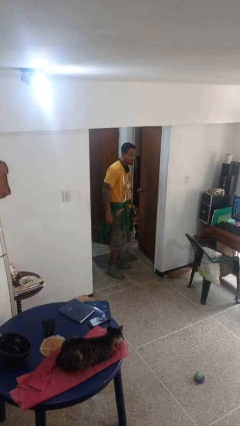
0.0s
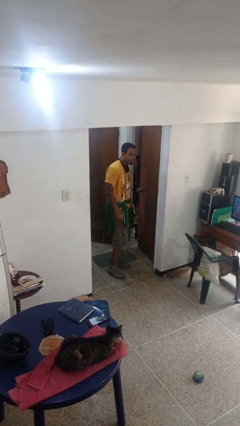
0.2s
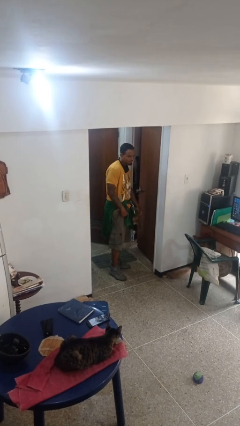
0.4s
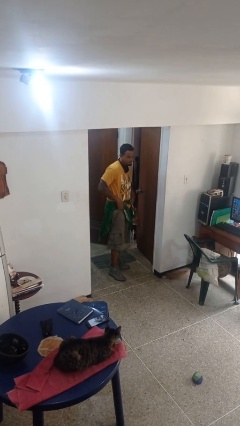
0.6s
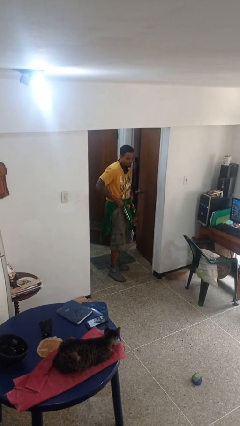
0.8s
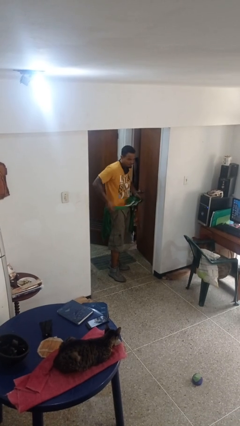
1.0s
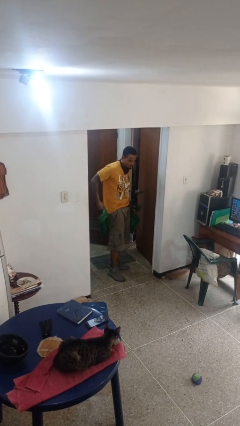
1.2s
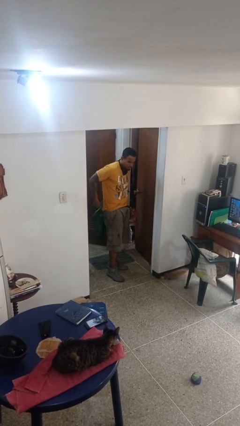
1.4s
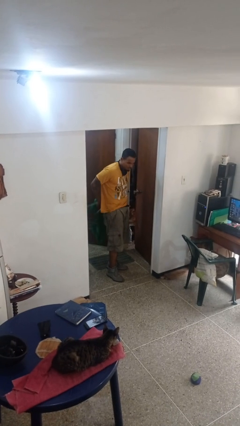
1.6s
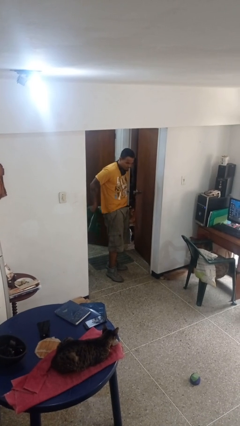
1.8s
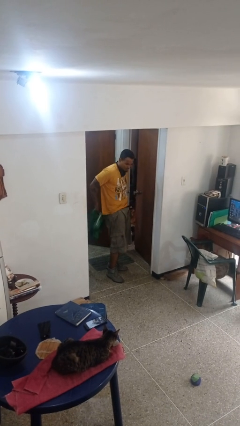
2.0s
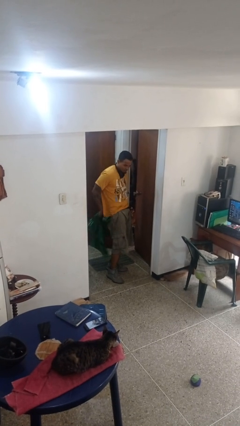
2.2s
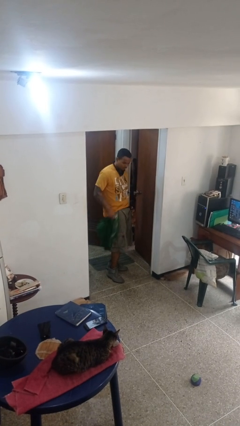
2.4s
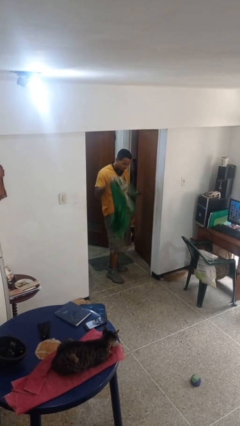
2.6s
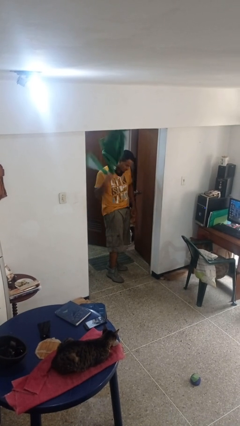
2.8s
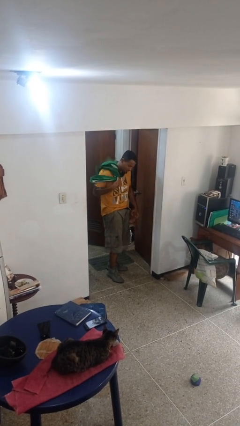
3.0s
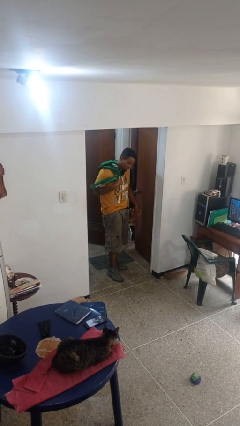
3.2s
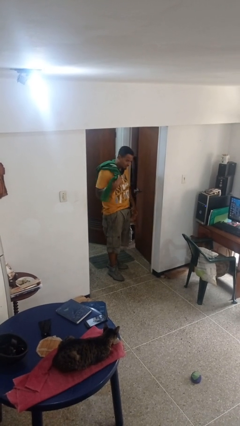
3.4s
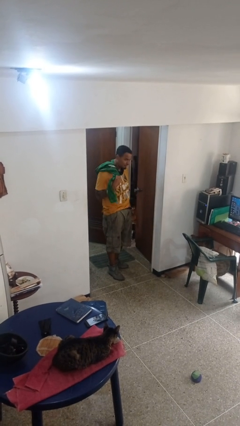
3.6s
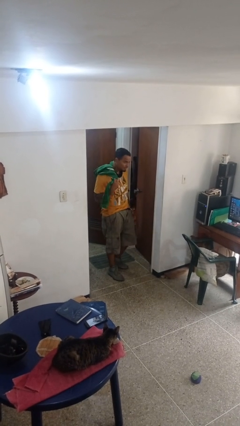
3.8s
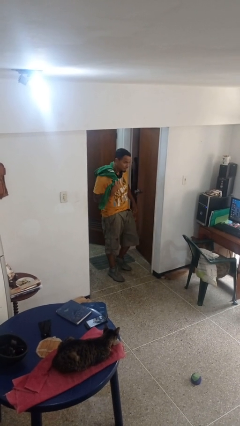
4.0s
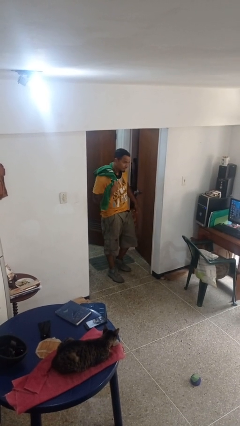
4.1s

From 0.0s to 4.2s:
person unties jacket around waist

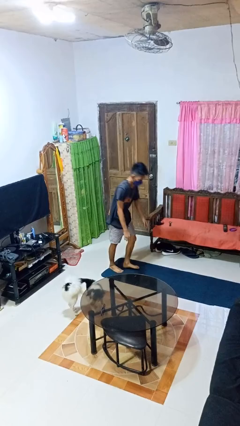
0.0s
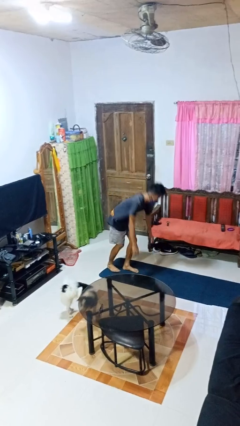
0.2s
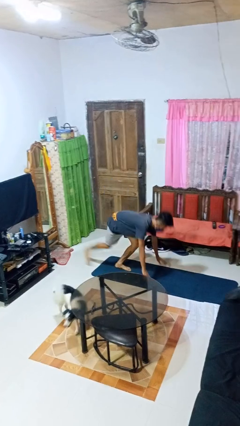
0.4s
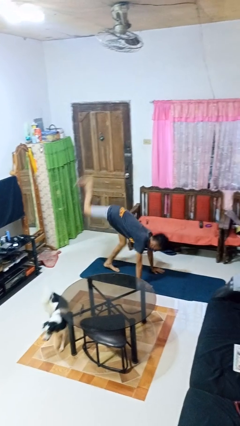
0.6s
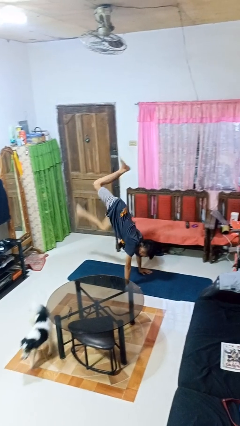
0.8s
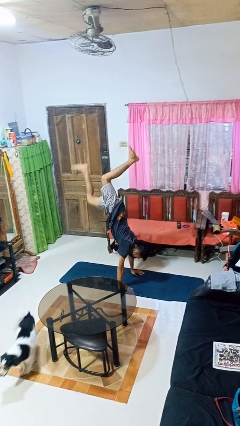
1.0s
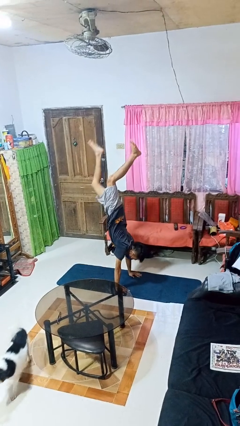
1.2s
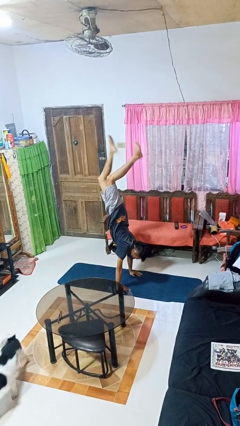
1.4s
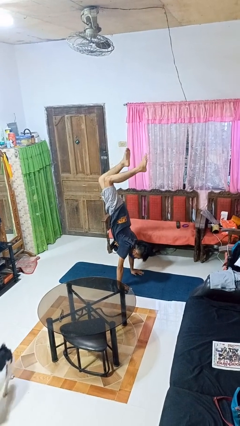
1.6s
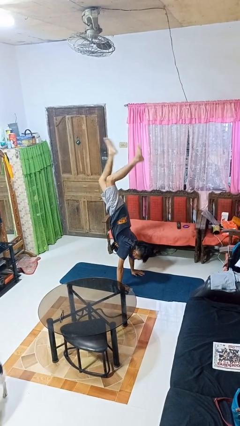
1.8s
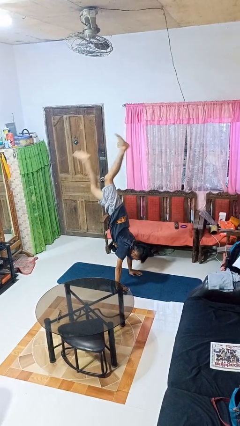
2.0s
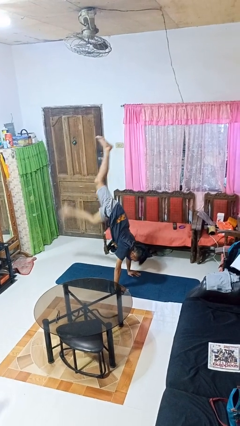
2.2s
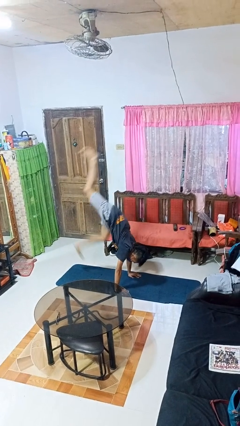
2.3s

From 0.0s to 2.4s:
person handstand

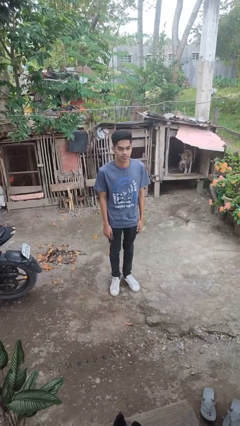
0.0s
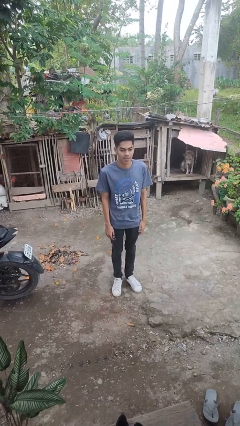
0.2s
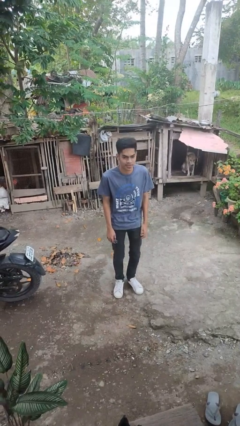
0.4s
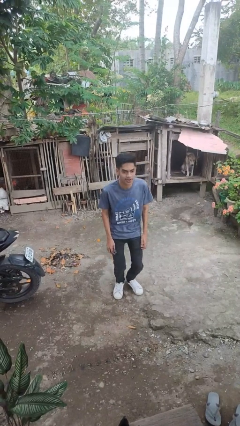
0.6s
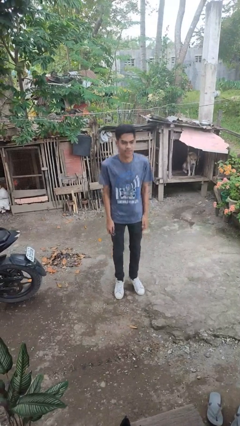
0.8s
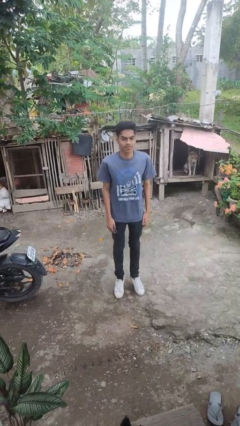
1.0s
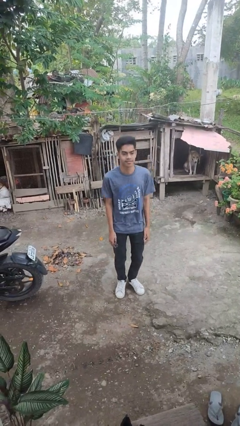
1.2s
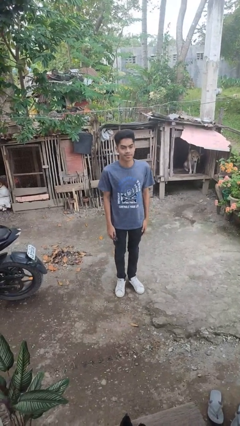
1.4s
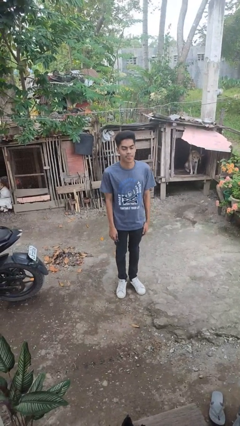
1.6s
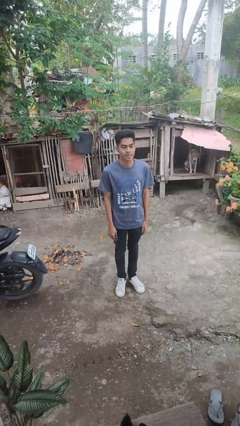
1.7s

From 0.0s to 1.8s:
person jumps

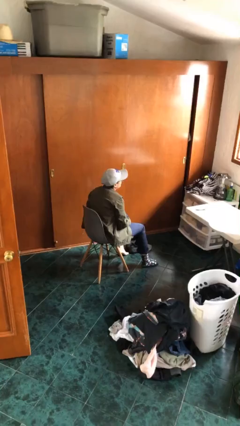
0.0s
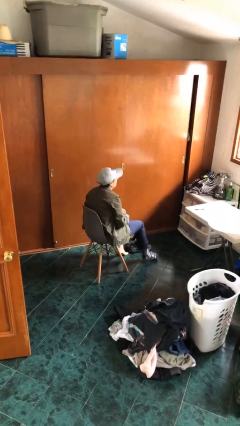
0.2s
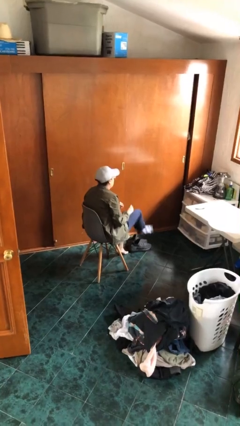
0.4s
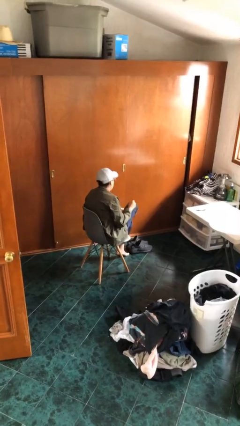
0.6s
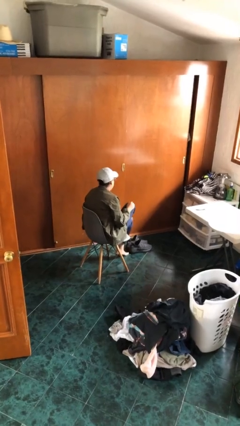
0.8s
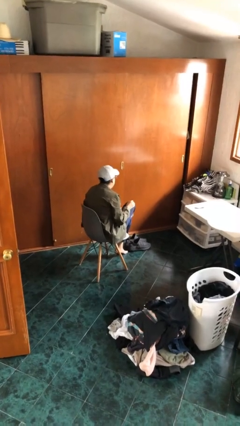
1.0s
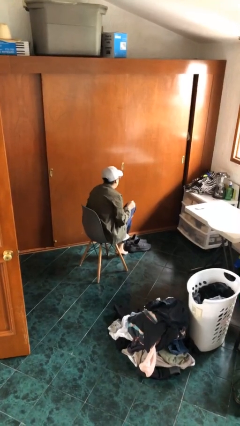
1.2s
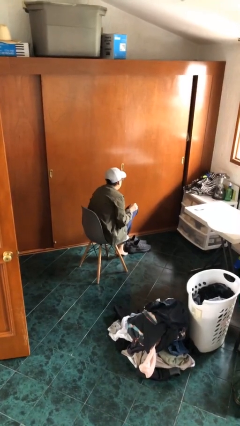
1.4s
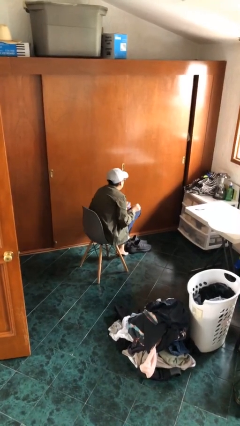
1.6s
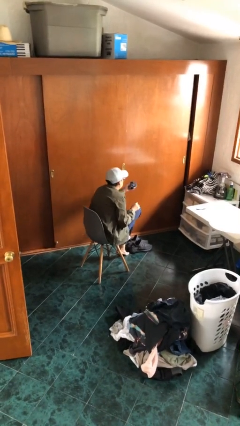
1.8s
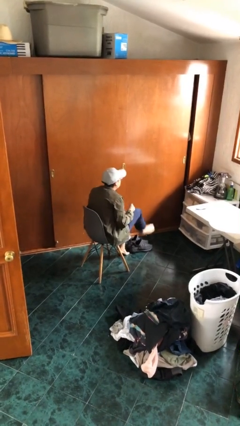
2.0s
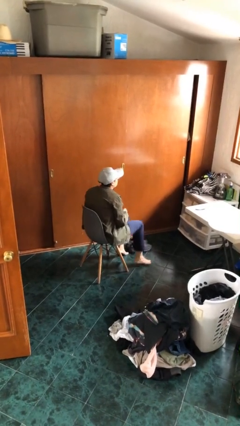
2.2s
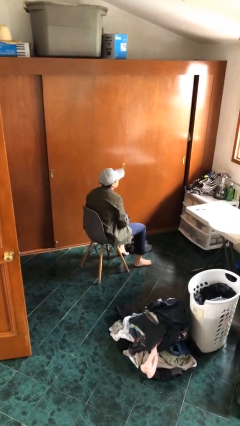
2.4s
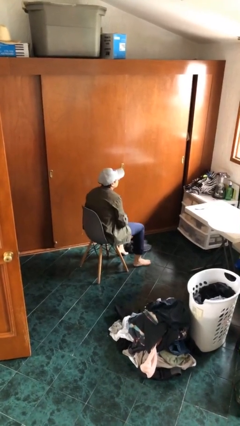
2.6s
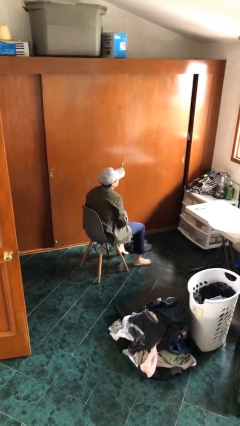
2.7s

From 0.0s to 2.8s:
person takes off socks

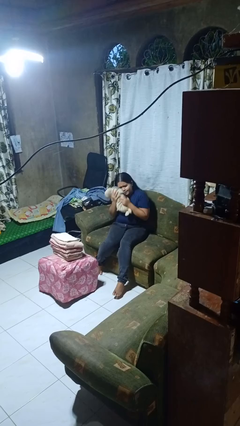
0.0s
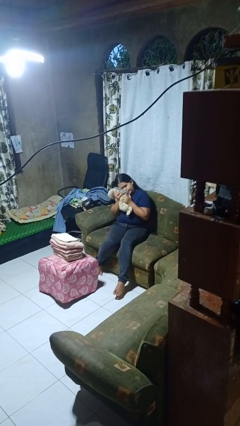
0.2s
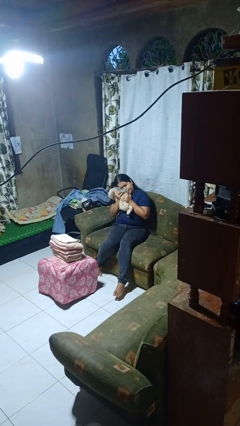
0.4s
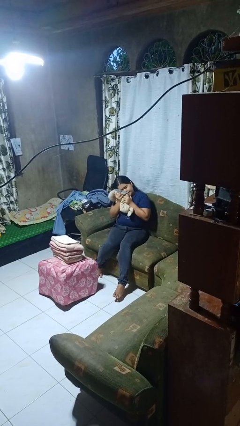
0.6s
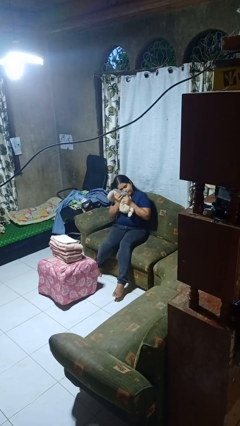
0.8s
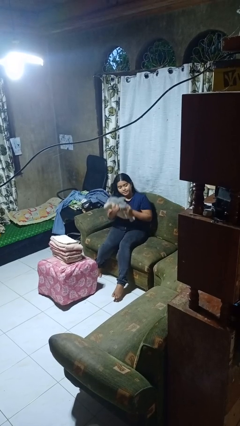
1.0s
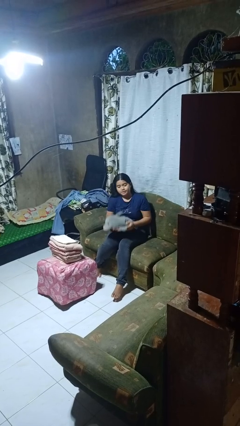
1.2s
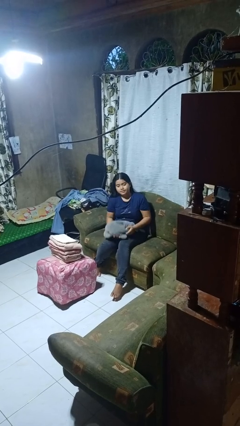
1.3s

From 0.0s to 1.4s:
person hugs stuffed animal

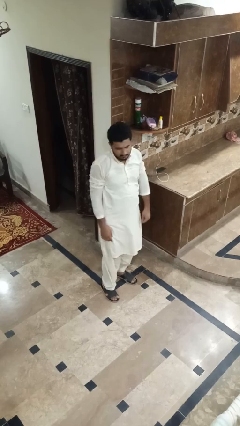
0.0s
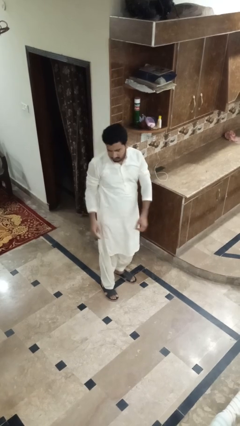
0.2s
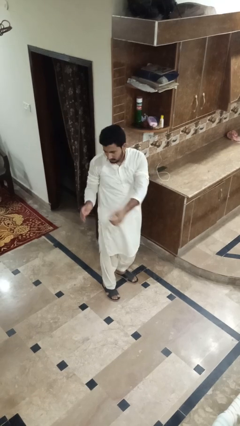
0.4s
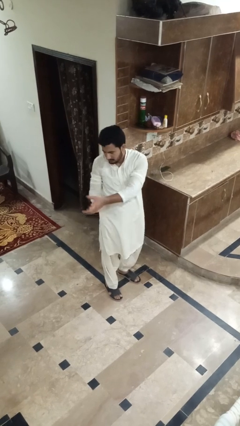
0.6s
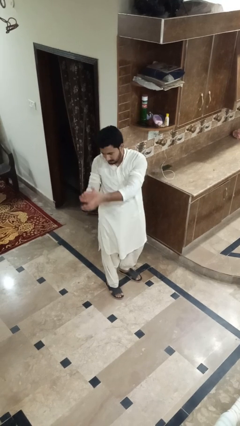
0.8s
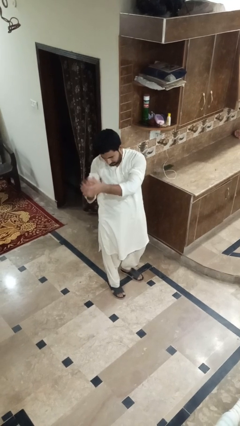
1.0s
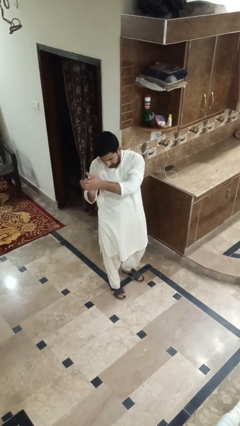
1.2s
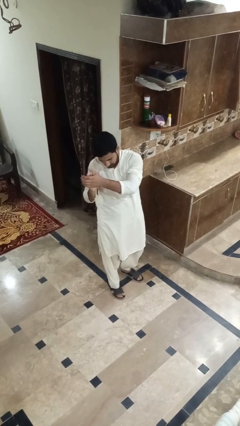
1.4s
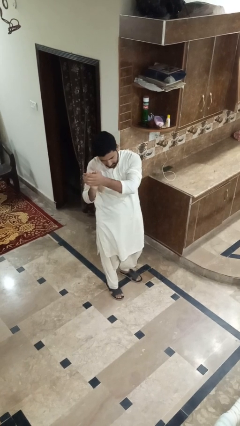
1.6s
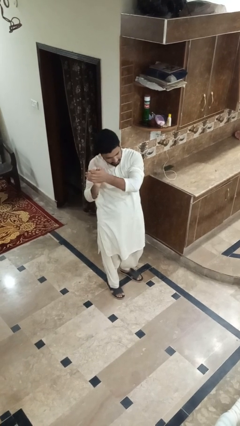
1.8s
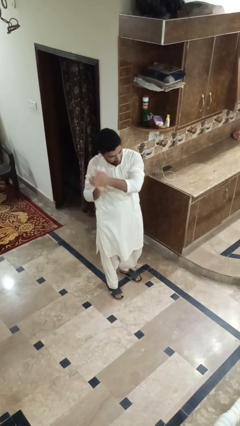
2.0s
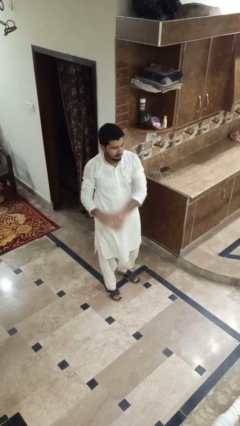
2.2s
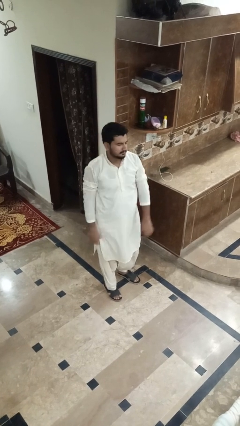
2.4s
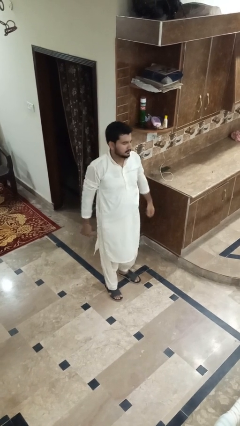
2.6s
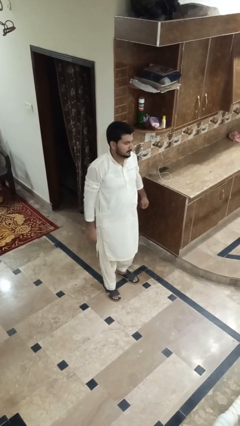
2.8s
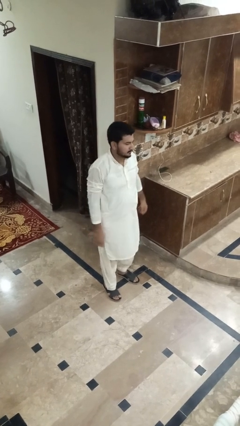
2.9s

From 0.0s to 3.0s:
person claps hands

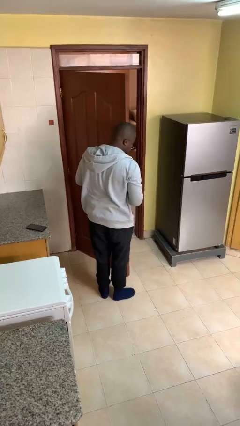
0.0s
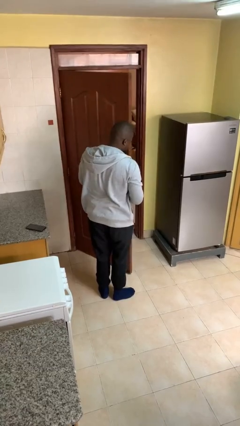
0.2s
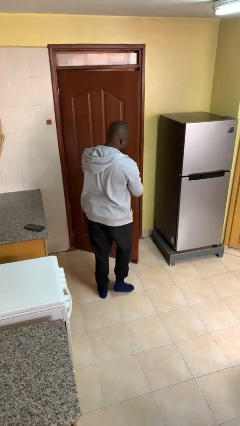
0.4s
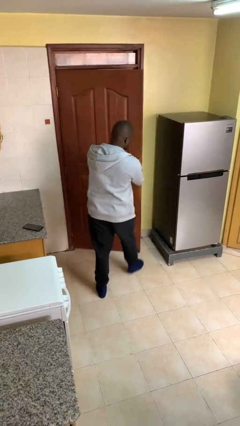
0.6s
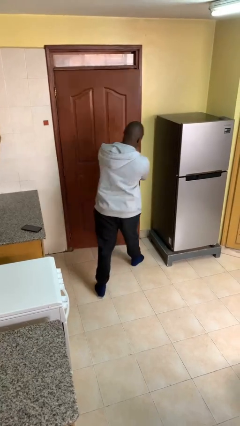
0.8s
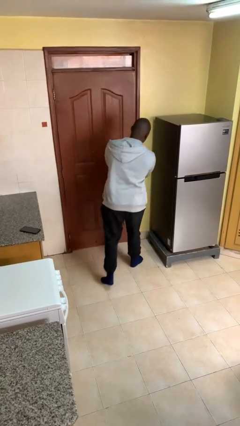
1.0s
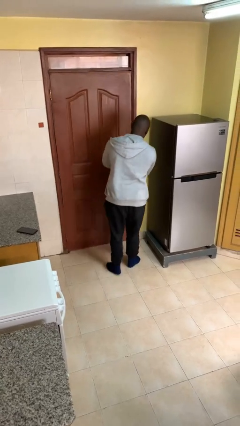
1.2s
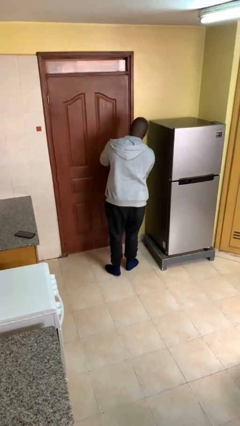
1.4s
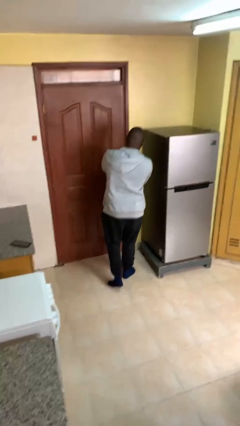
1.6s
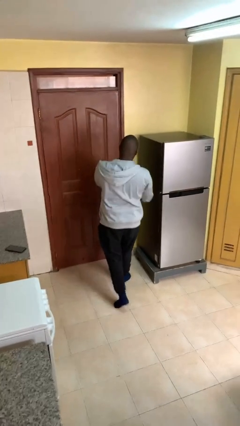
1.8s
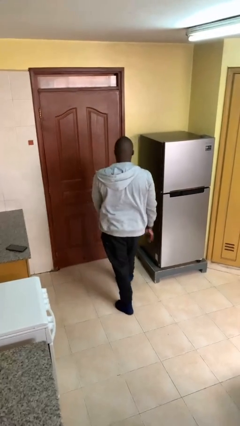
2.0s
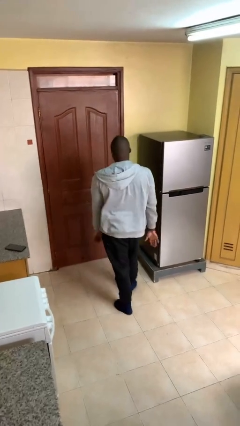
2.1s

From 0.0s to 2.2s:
person closes facility door
